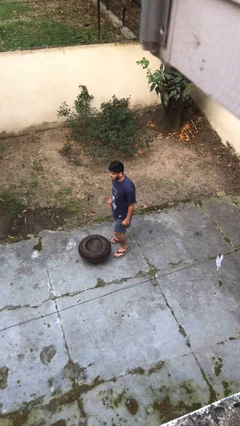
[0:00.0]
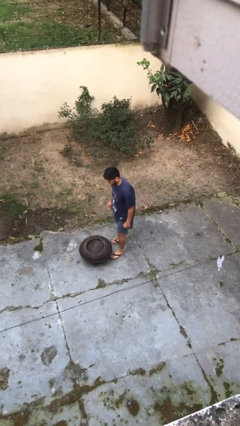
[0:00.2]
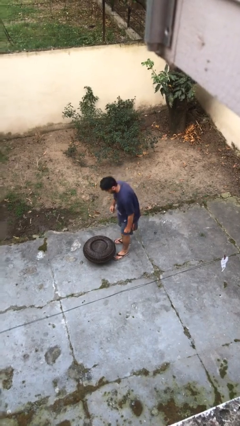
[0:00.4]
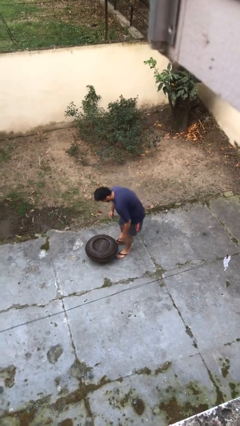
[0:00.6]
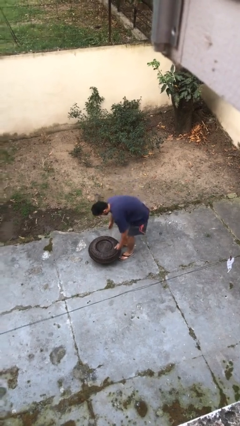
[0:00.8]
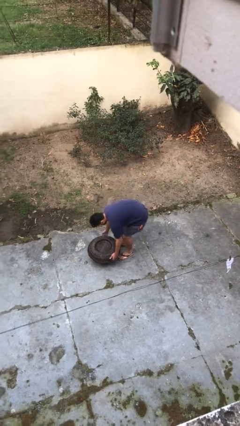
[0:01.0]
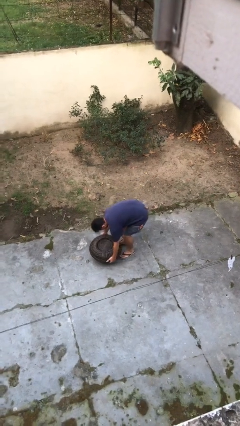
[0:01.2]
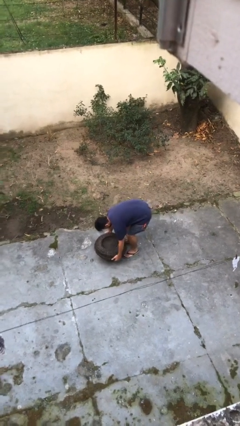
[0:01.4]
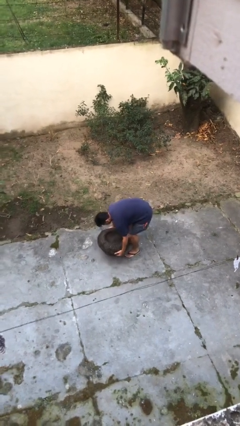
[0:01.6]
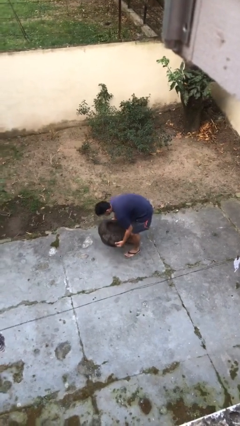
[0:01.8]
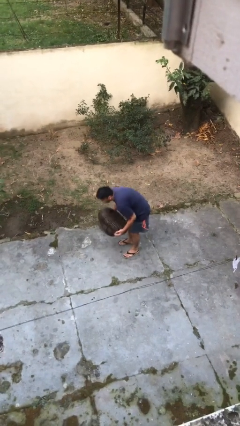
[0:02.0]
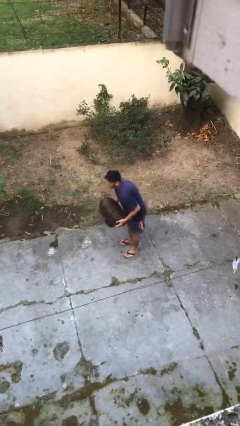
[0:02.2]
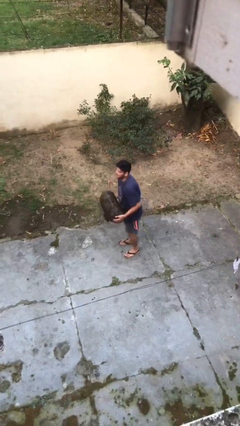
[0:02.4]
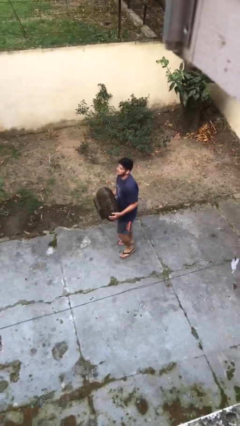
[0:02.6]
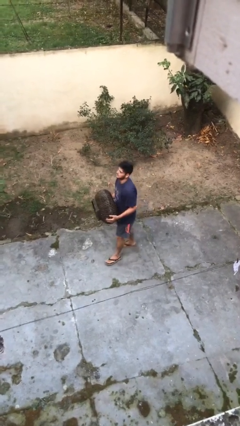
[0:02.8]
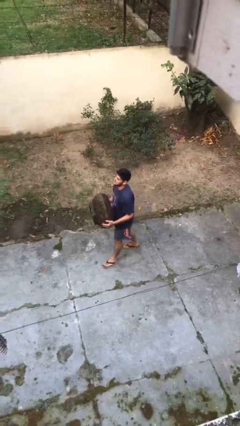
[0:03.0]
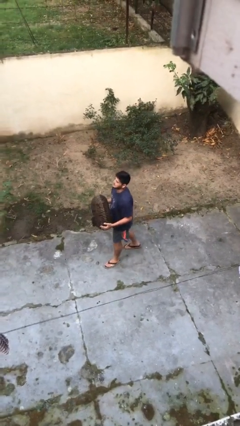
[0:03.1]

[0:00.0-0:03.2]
person picks up object from floor

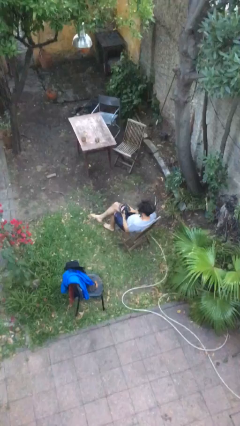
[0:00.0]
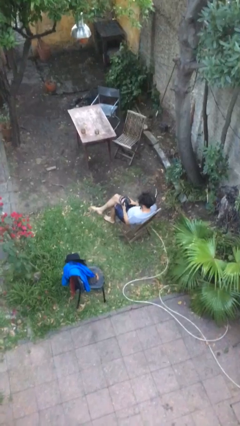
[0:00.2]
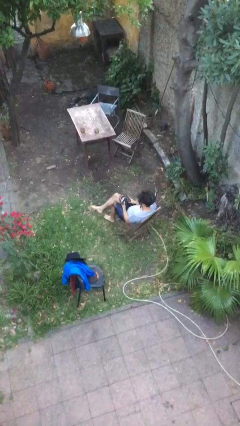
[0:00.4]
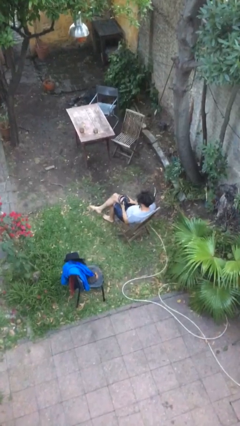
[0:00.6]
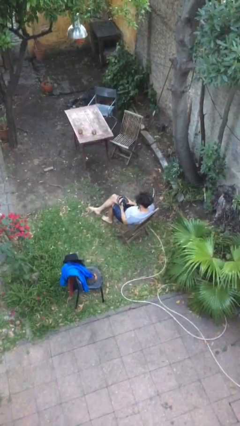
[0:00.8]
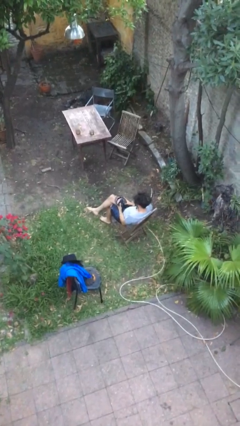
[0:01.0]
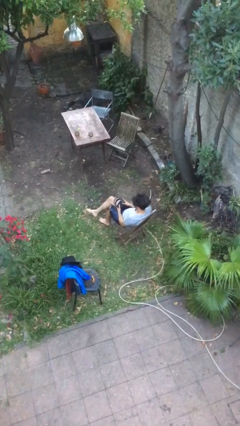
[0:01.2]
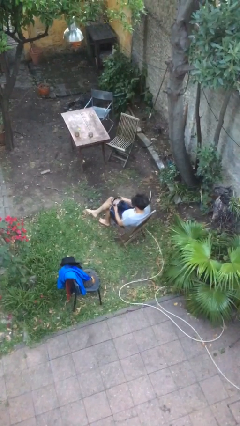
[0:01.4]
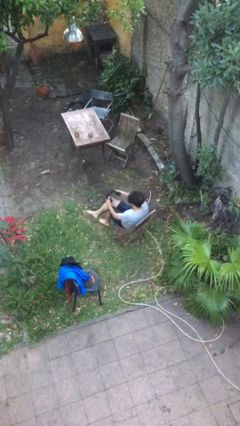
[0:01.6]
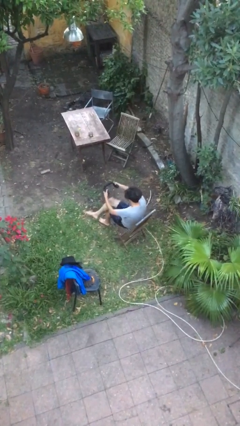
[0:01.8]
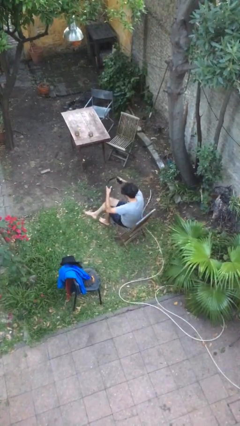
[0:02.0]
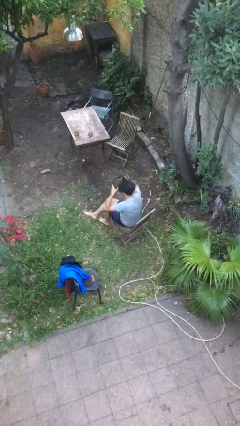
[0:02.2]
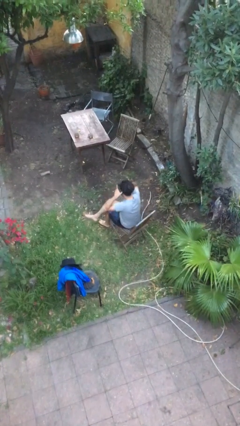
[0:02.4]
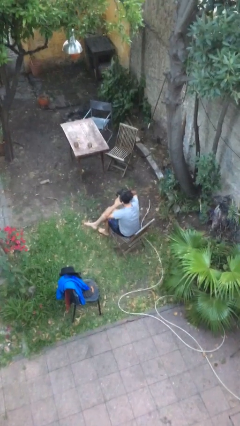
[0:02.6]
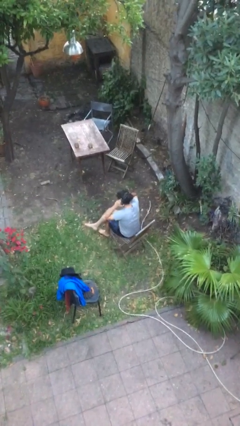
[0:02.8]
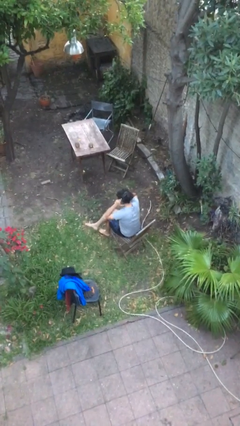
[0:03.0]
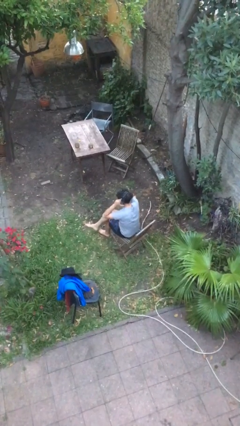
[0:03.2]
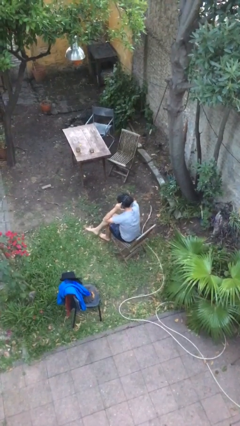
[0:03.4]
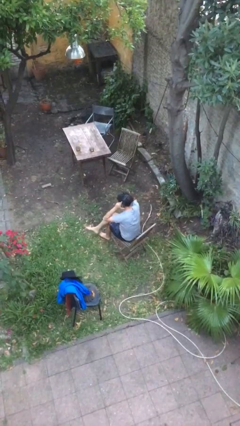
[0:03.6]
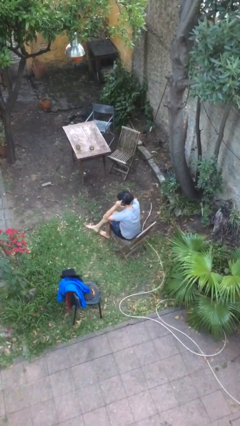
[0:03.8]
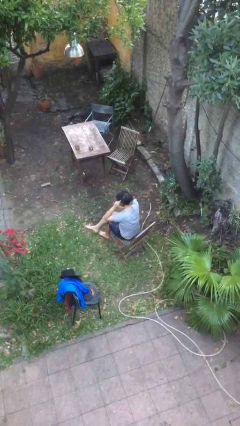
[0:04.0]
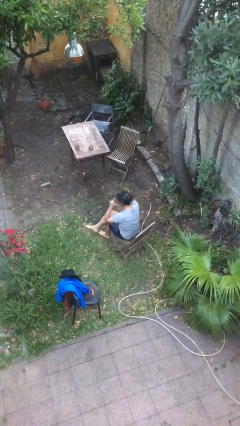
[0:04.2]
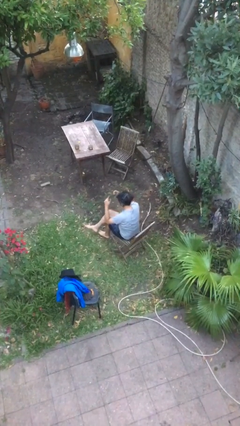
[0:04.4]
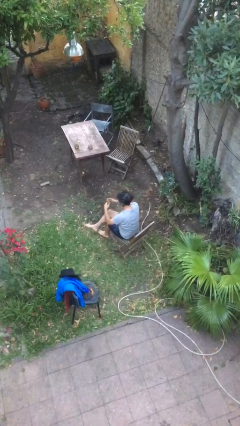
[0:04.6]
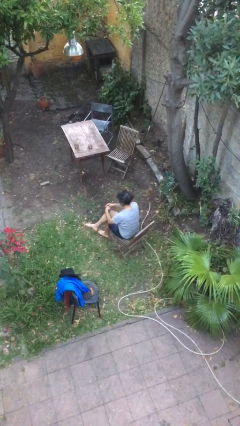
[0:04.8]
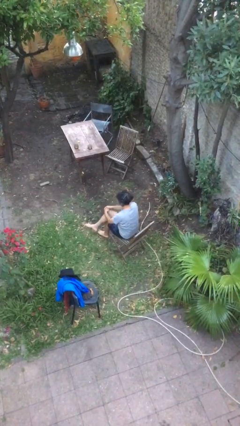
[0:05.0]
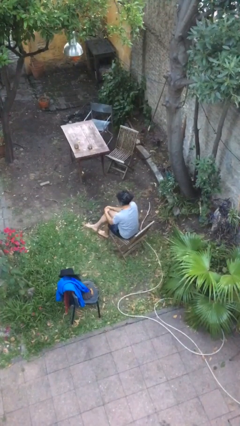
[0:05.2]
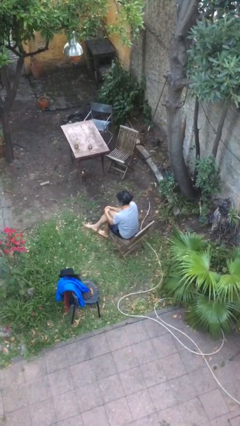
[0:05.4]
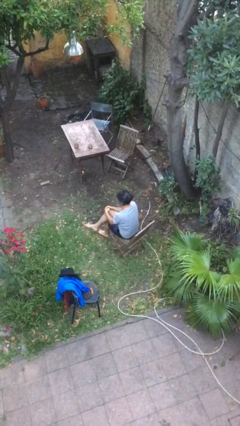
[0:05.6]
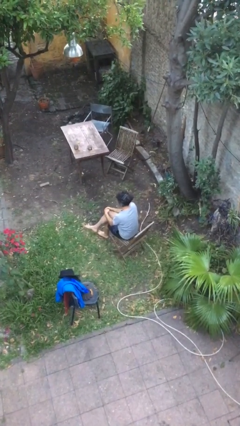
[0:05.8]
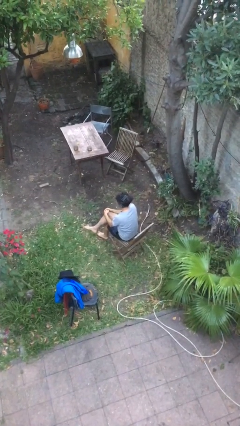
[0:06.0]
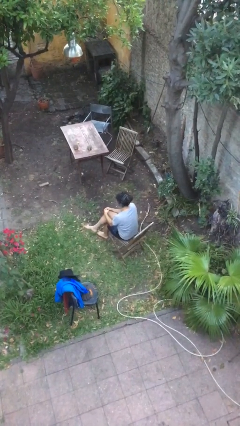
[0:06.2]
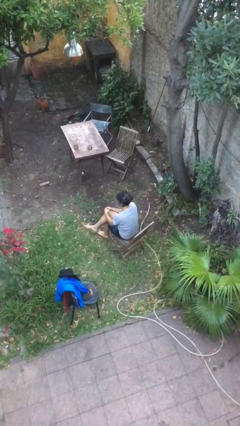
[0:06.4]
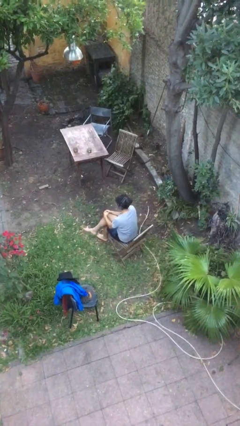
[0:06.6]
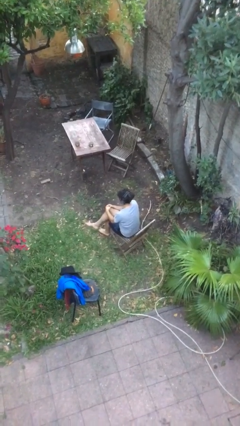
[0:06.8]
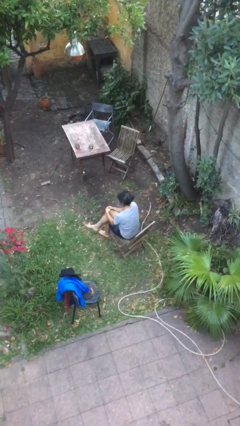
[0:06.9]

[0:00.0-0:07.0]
person puts on headphones

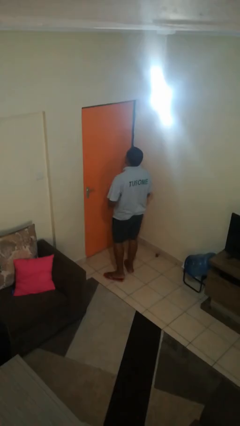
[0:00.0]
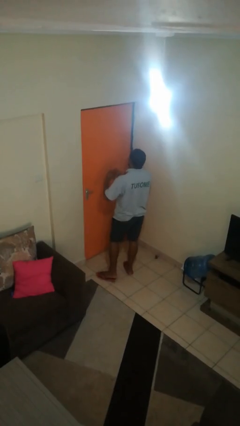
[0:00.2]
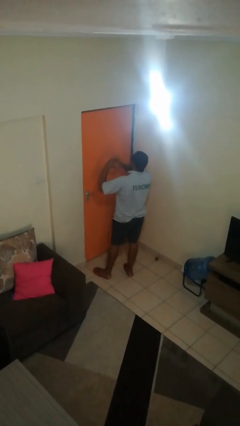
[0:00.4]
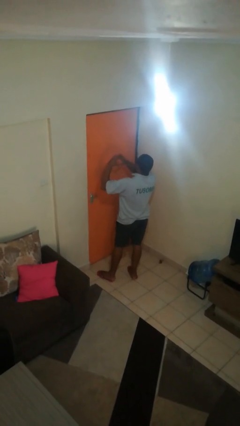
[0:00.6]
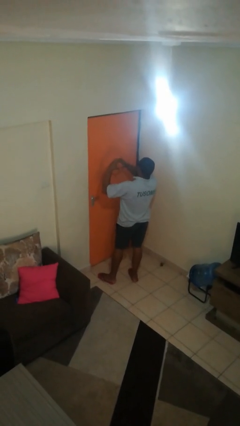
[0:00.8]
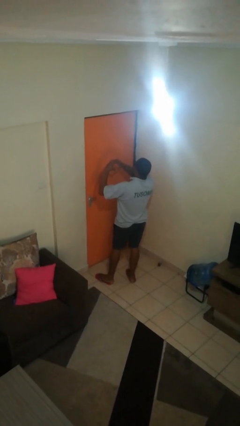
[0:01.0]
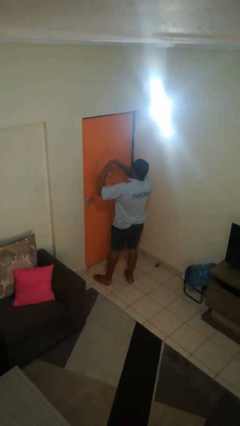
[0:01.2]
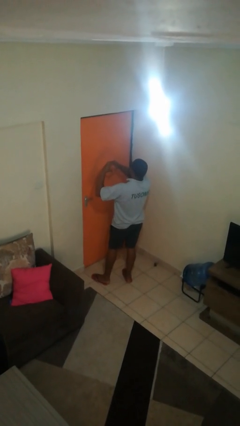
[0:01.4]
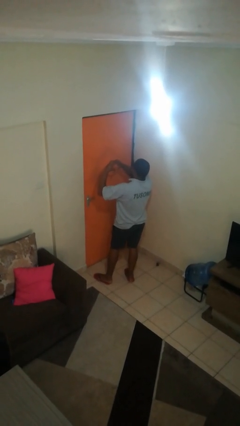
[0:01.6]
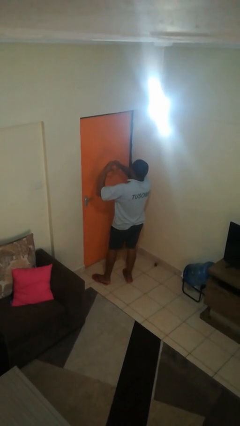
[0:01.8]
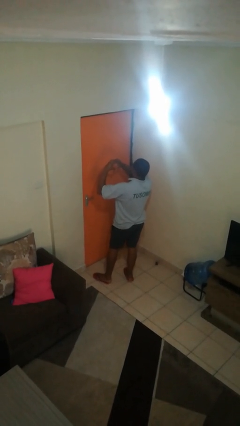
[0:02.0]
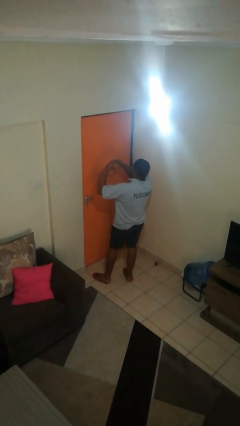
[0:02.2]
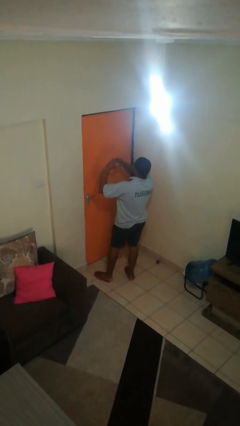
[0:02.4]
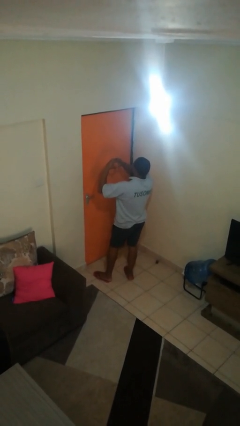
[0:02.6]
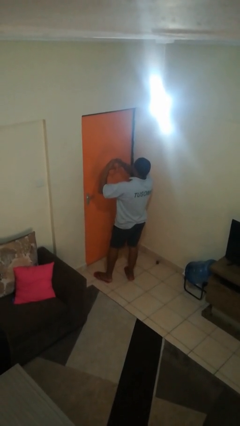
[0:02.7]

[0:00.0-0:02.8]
person gestures heart

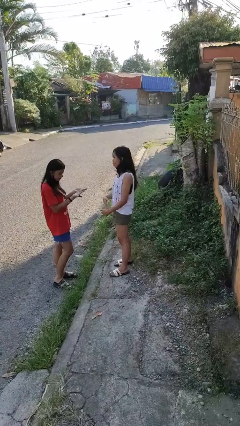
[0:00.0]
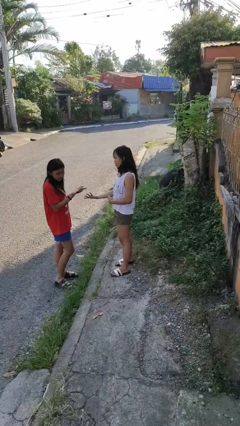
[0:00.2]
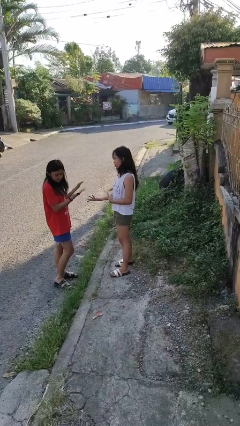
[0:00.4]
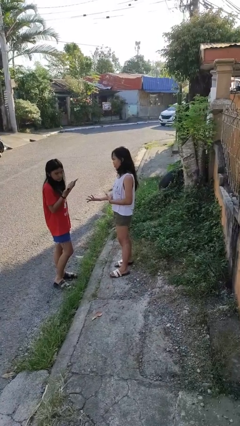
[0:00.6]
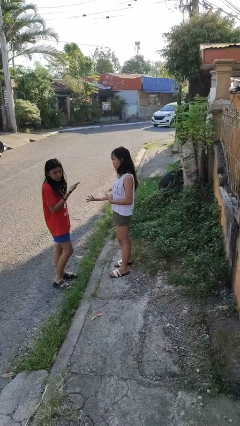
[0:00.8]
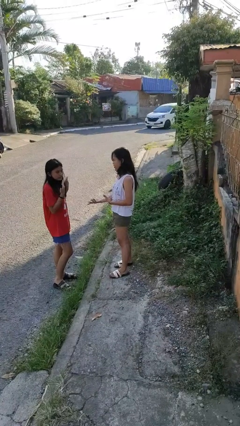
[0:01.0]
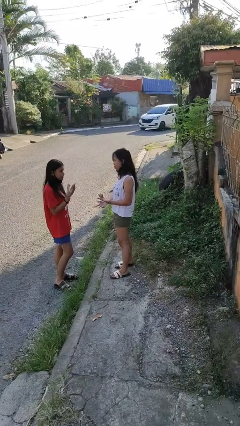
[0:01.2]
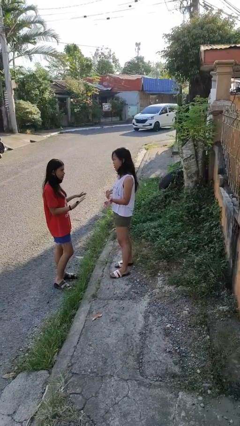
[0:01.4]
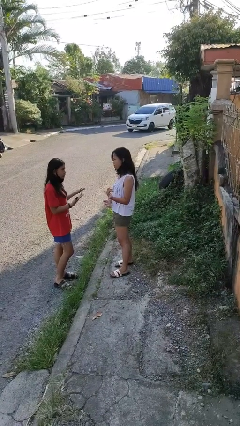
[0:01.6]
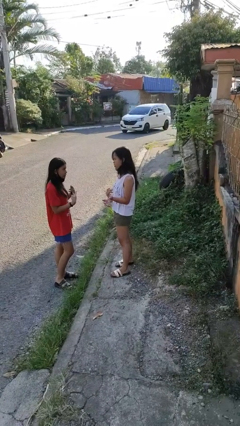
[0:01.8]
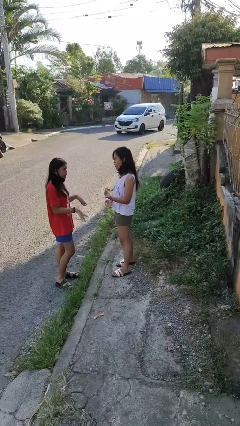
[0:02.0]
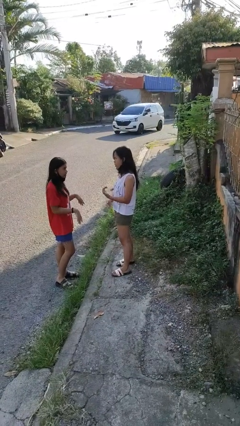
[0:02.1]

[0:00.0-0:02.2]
person talks to person

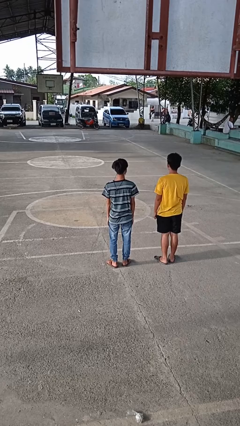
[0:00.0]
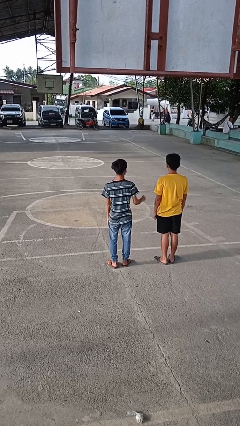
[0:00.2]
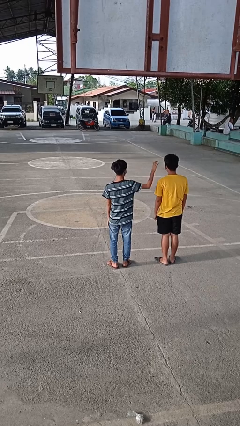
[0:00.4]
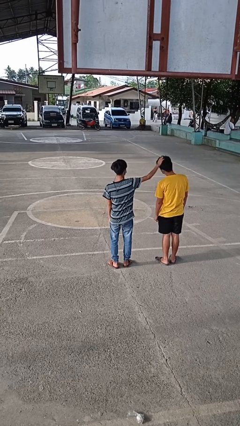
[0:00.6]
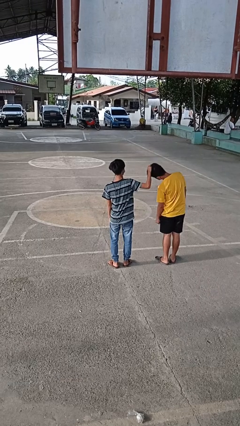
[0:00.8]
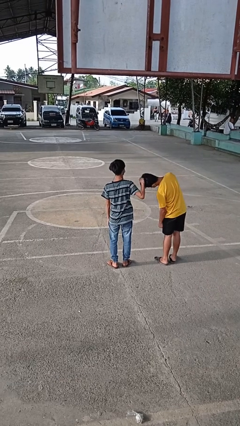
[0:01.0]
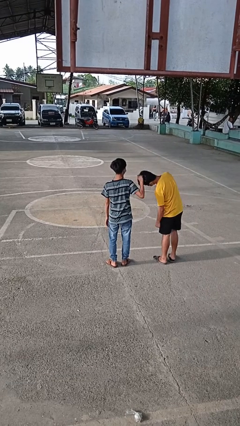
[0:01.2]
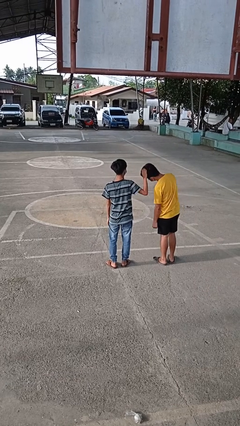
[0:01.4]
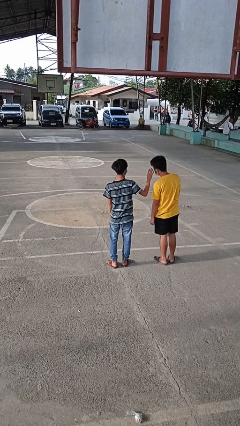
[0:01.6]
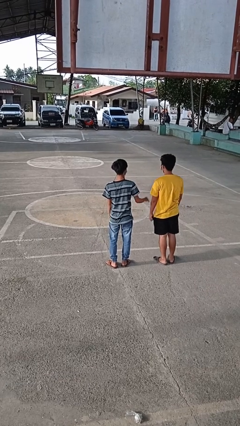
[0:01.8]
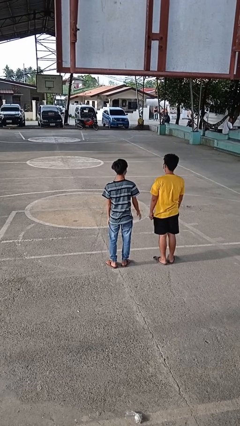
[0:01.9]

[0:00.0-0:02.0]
person grabs person by hair

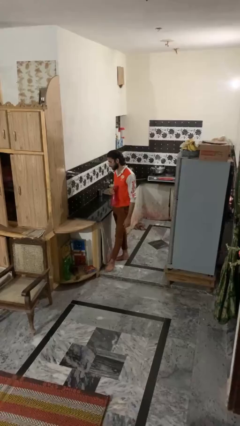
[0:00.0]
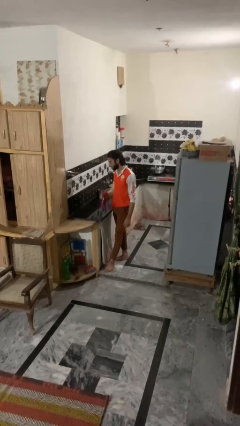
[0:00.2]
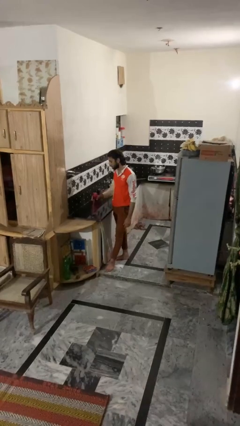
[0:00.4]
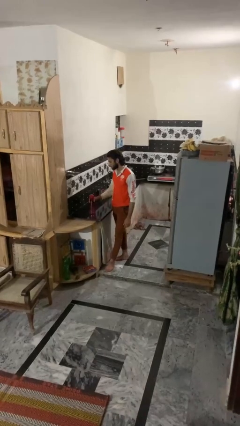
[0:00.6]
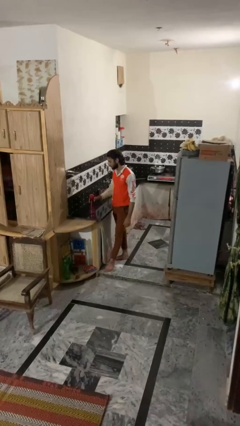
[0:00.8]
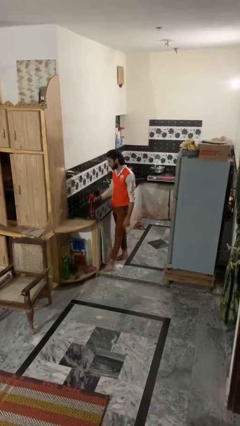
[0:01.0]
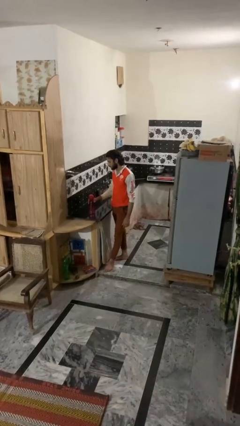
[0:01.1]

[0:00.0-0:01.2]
person puts down object on countertop
